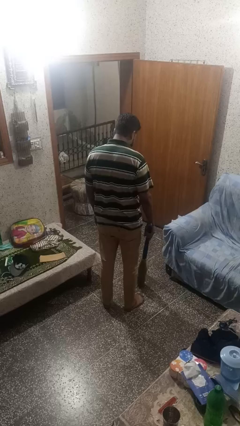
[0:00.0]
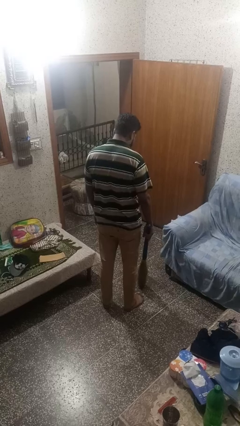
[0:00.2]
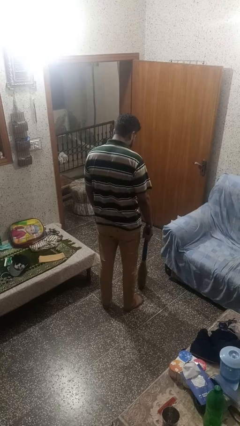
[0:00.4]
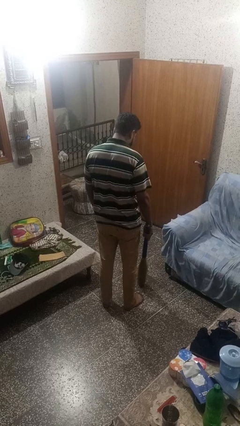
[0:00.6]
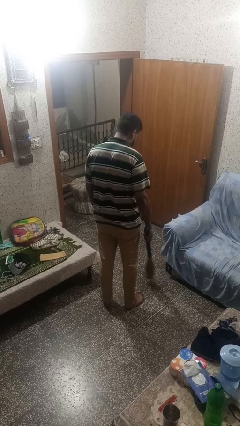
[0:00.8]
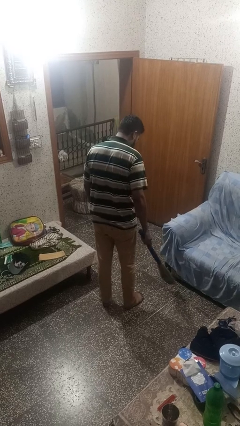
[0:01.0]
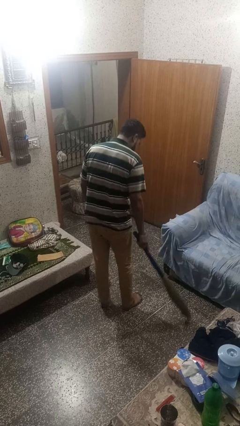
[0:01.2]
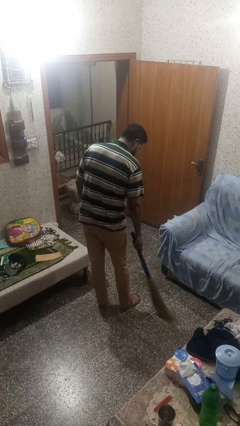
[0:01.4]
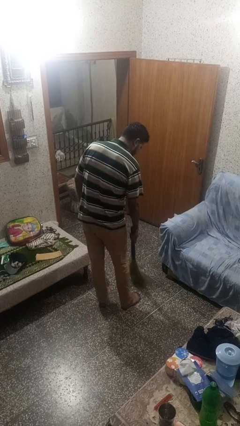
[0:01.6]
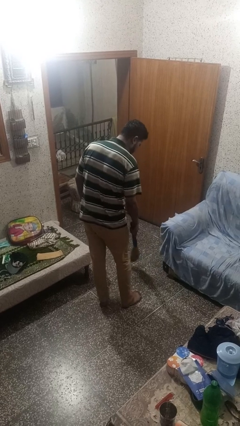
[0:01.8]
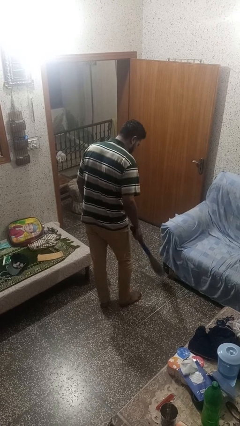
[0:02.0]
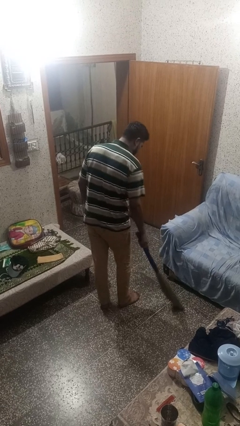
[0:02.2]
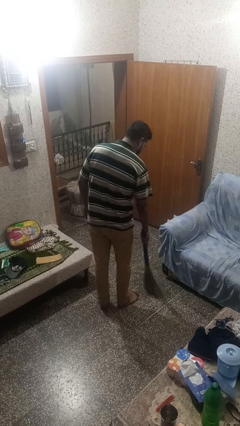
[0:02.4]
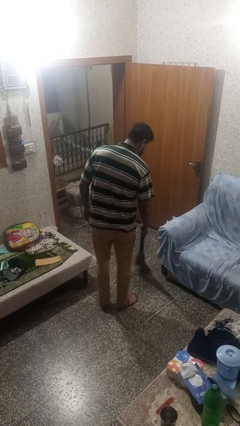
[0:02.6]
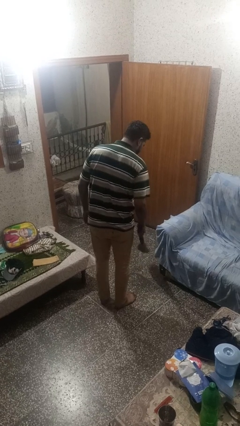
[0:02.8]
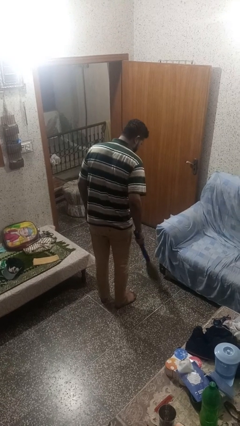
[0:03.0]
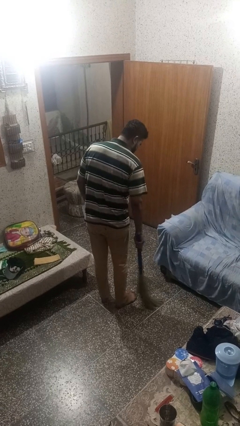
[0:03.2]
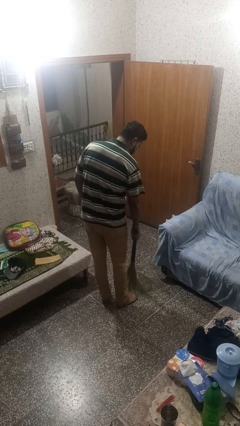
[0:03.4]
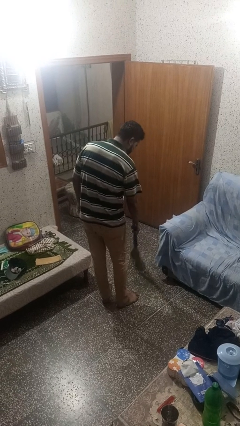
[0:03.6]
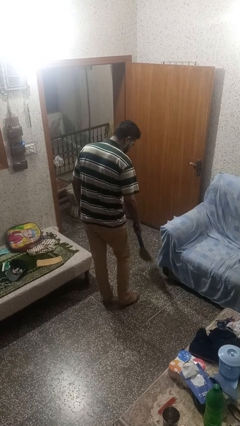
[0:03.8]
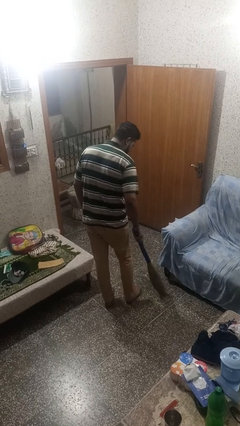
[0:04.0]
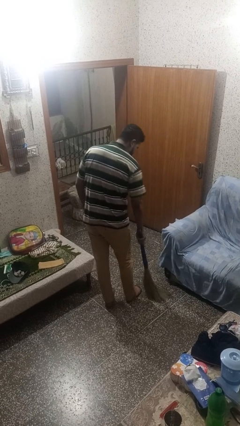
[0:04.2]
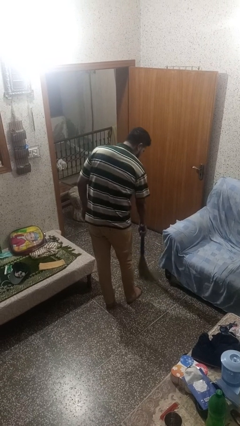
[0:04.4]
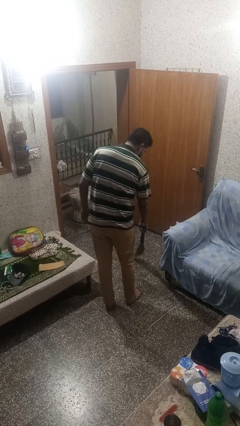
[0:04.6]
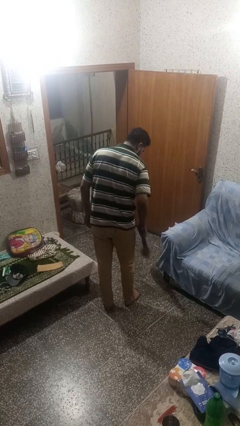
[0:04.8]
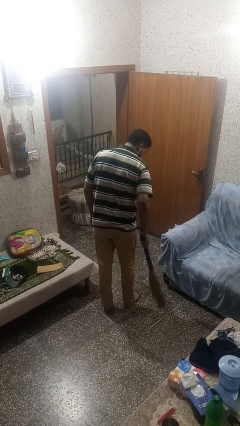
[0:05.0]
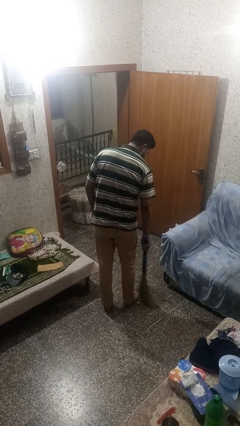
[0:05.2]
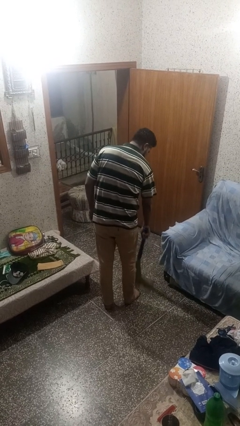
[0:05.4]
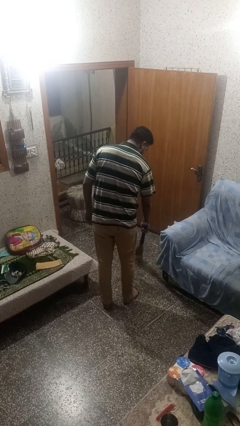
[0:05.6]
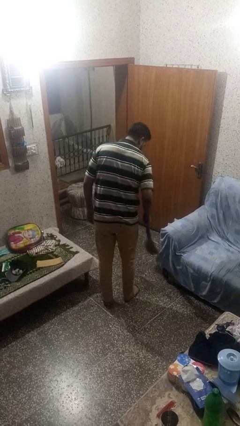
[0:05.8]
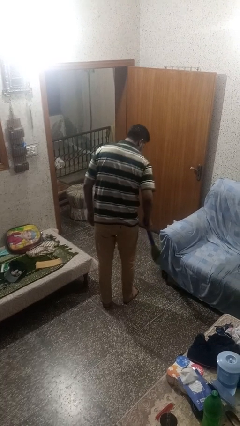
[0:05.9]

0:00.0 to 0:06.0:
person sweeps floor

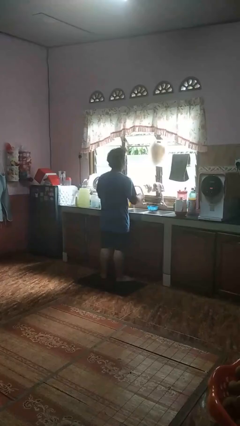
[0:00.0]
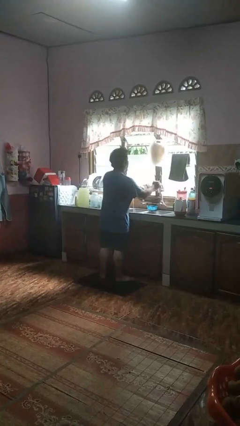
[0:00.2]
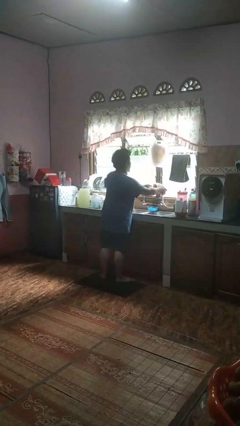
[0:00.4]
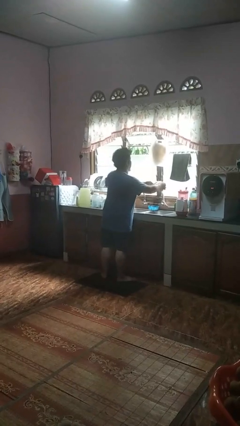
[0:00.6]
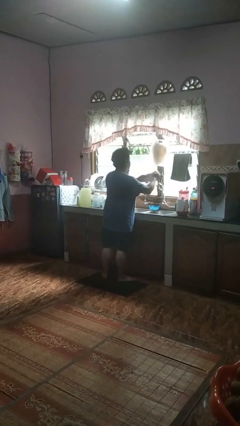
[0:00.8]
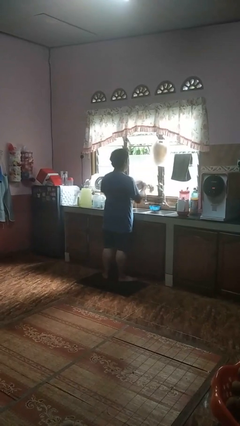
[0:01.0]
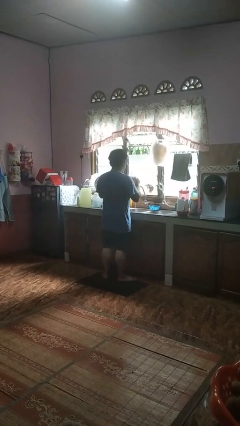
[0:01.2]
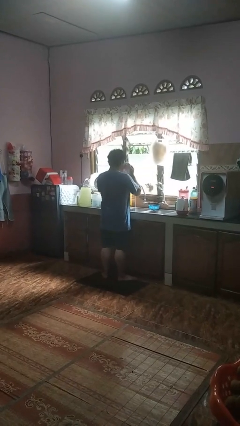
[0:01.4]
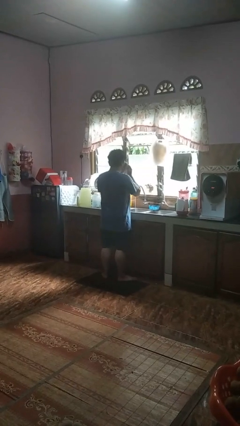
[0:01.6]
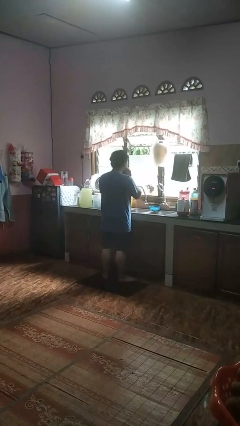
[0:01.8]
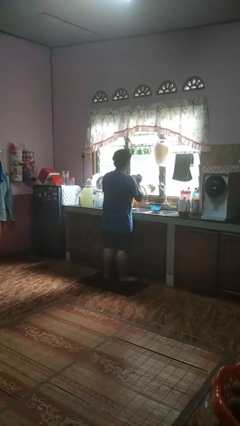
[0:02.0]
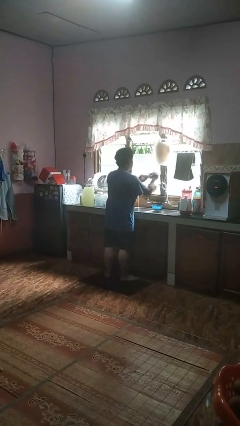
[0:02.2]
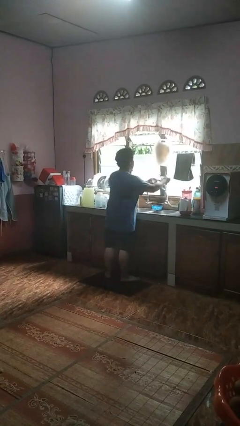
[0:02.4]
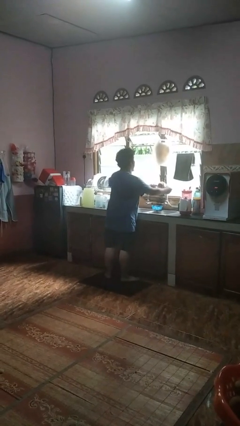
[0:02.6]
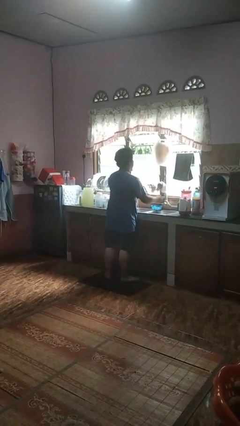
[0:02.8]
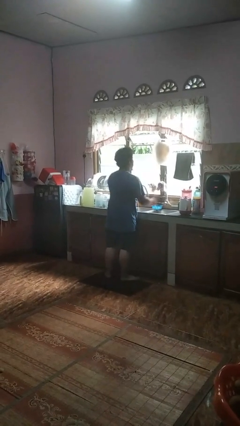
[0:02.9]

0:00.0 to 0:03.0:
person dries face with towel

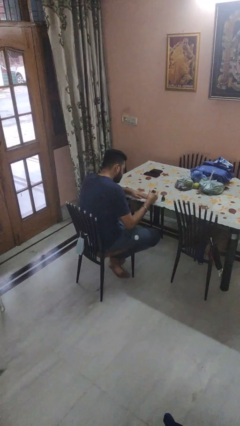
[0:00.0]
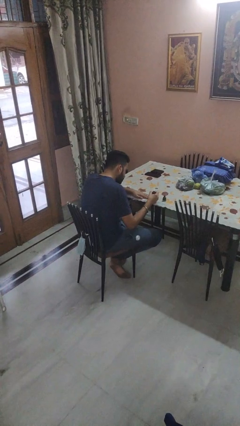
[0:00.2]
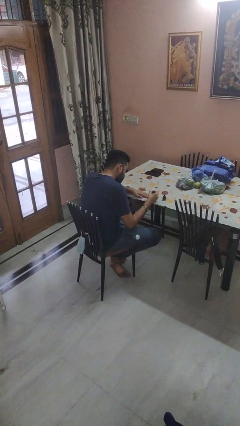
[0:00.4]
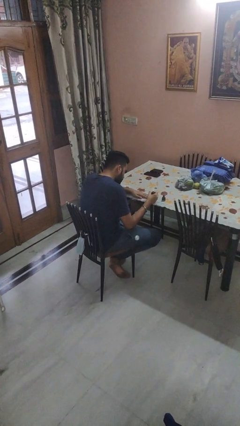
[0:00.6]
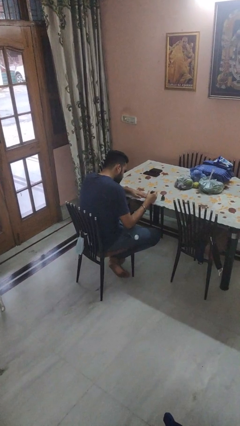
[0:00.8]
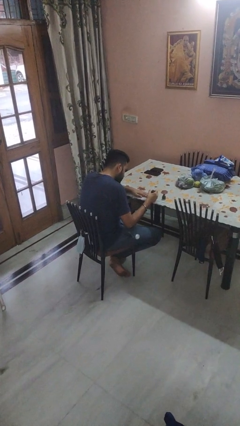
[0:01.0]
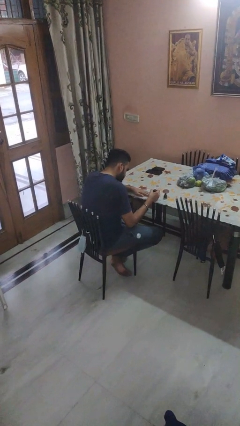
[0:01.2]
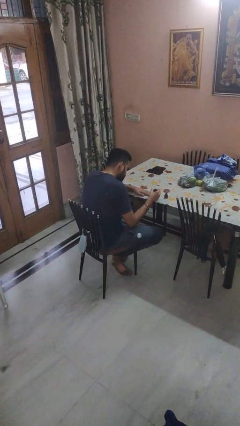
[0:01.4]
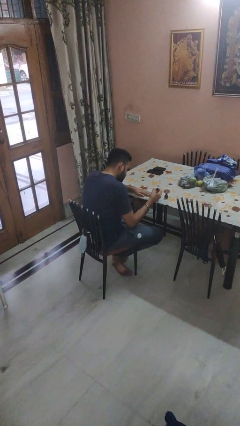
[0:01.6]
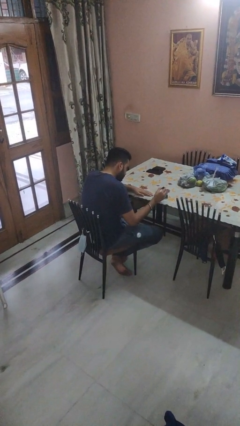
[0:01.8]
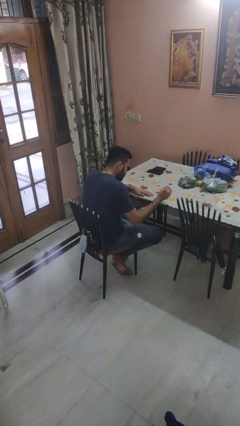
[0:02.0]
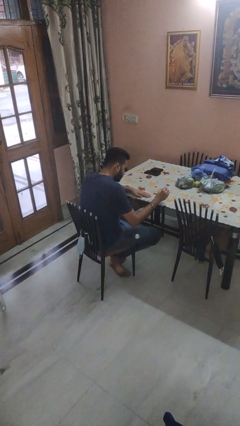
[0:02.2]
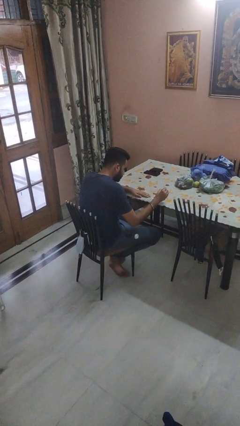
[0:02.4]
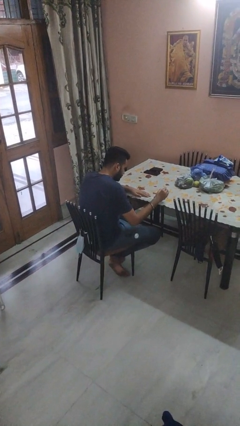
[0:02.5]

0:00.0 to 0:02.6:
person paints fingernails

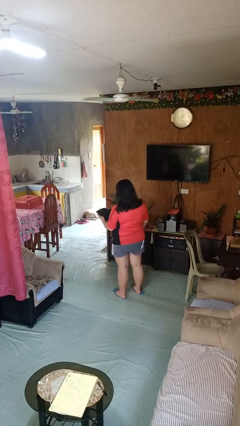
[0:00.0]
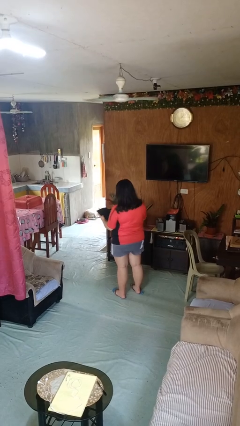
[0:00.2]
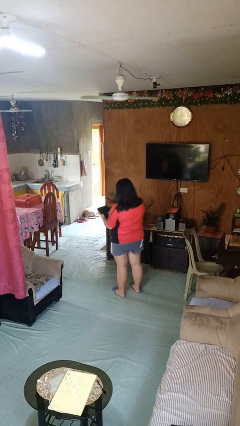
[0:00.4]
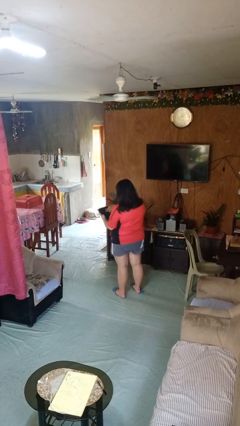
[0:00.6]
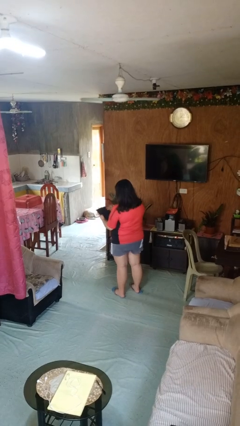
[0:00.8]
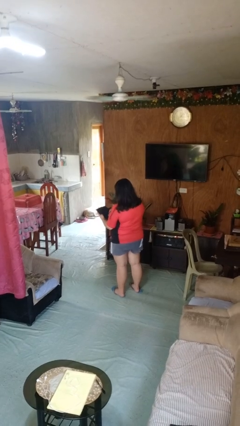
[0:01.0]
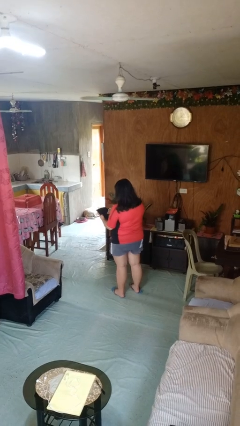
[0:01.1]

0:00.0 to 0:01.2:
person interacts with tablet

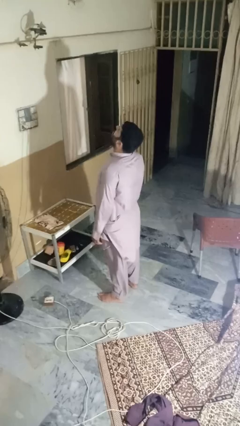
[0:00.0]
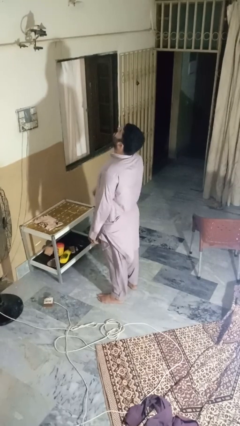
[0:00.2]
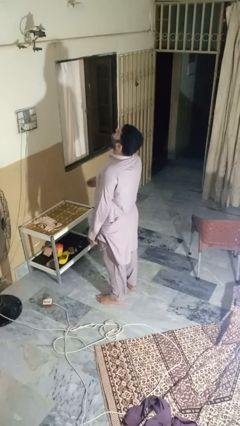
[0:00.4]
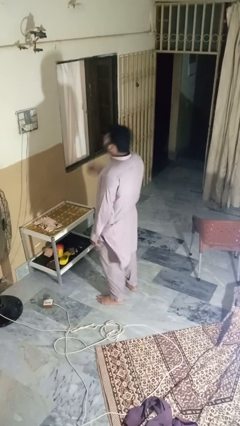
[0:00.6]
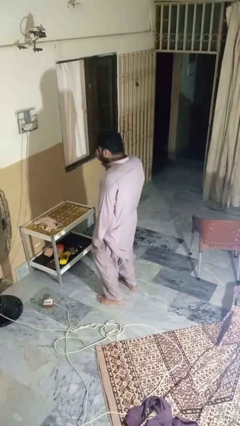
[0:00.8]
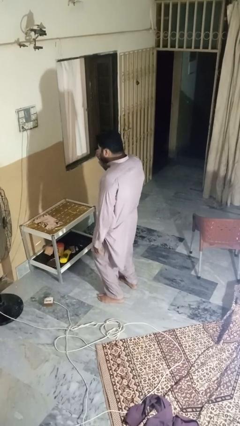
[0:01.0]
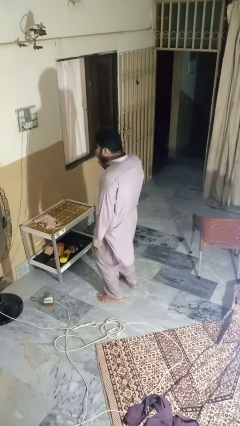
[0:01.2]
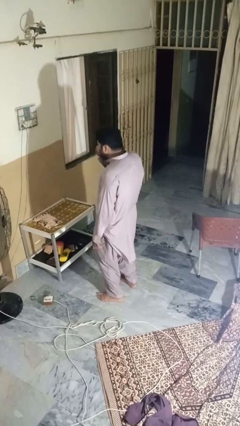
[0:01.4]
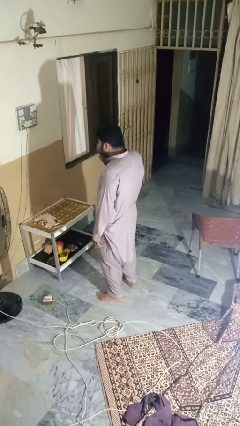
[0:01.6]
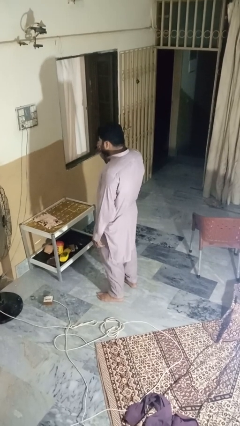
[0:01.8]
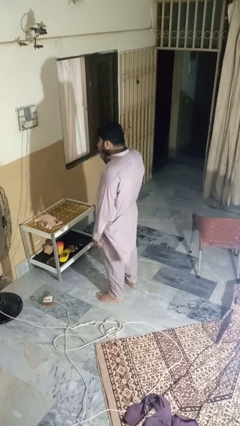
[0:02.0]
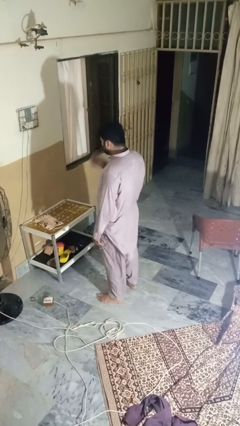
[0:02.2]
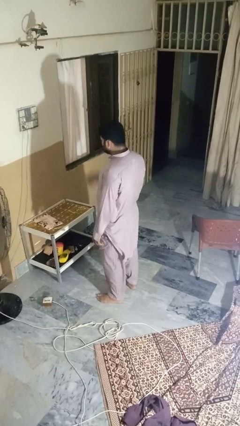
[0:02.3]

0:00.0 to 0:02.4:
person sneezes into hand

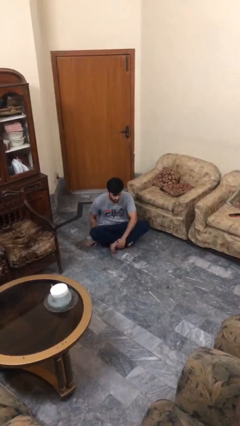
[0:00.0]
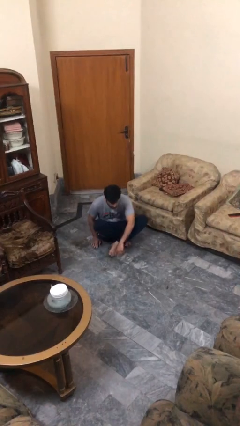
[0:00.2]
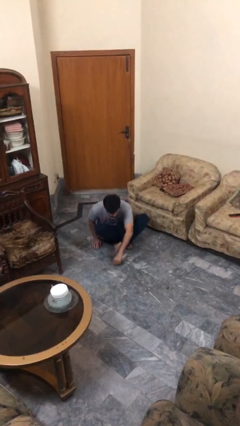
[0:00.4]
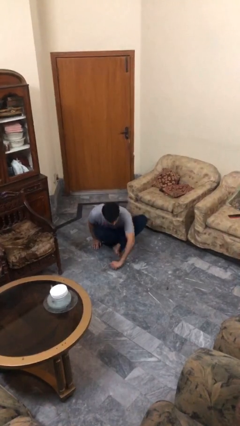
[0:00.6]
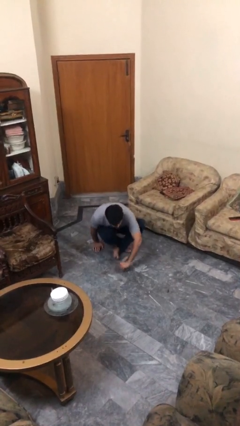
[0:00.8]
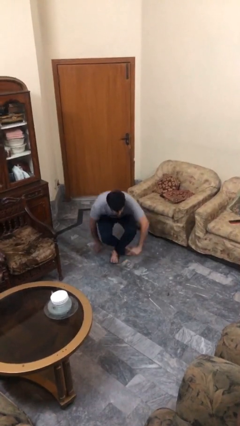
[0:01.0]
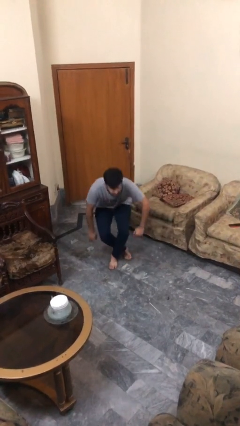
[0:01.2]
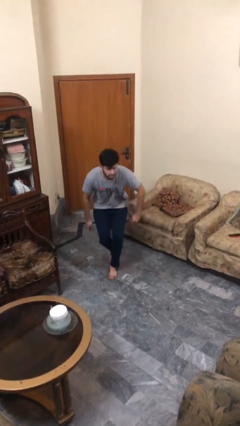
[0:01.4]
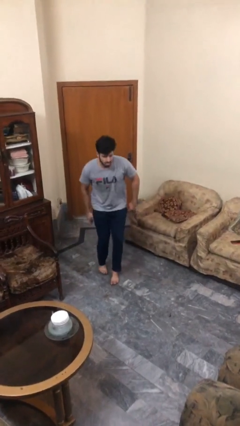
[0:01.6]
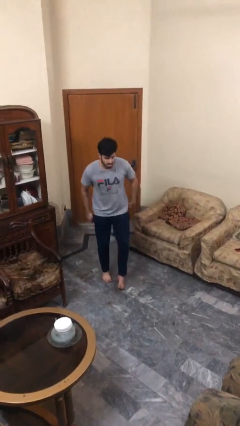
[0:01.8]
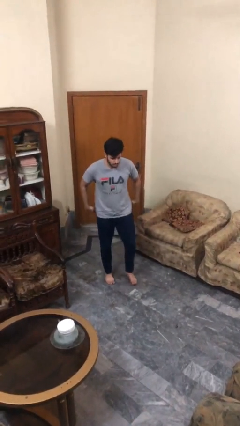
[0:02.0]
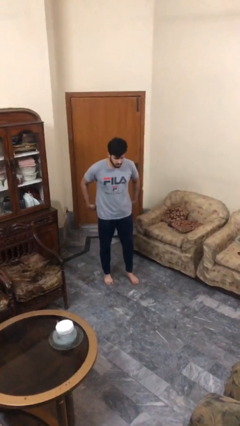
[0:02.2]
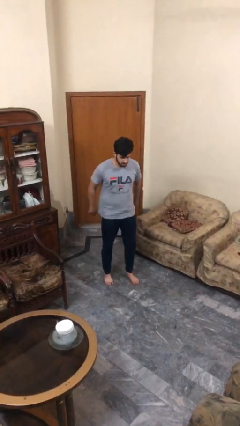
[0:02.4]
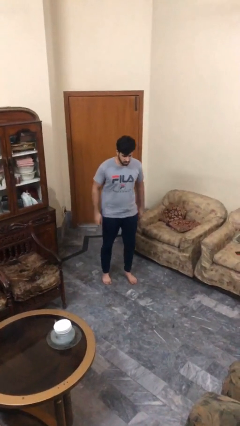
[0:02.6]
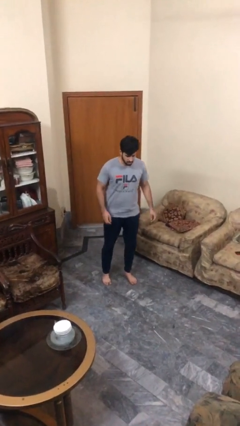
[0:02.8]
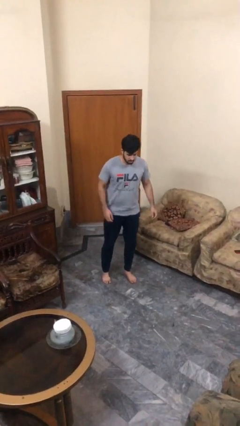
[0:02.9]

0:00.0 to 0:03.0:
person stands up from floor
